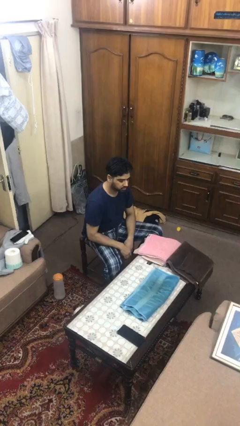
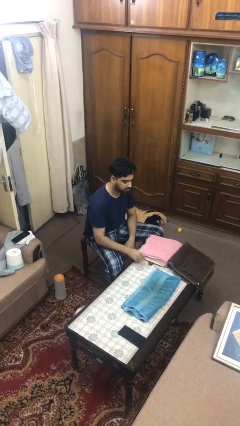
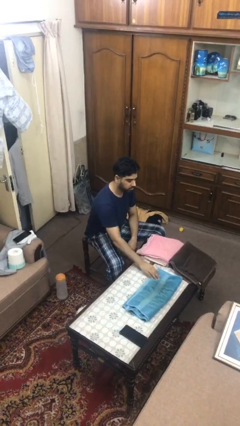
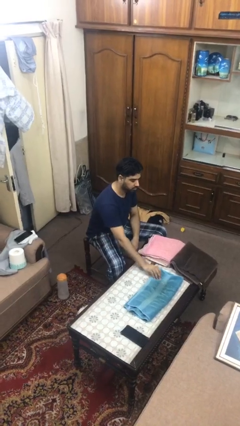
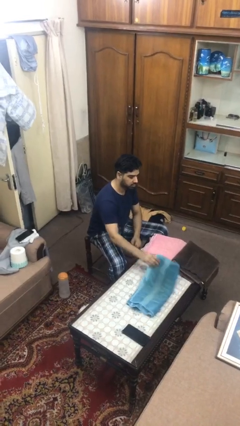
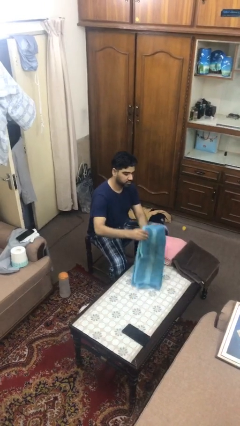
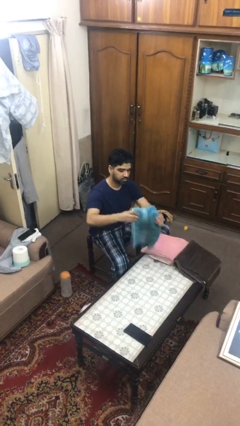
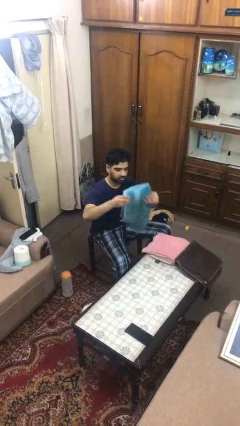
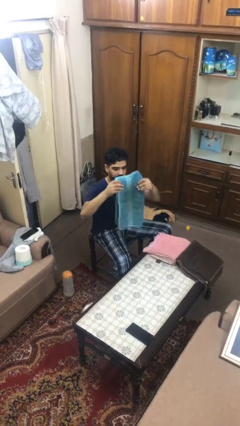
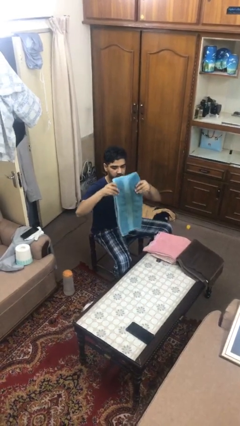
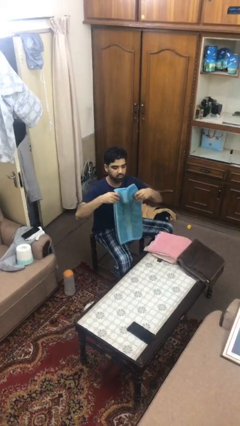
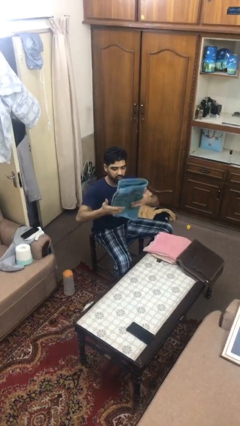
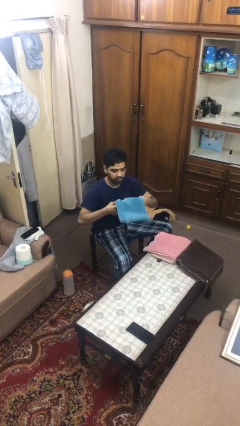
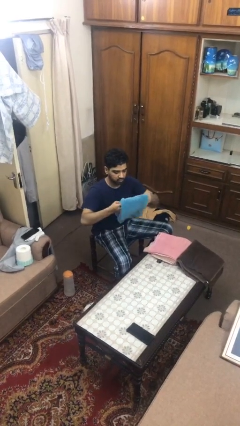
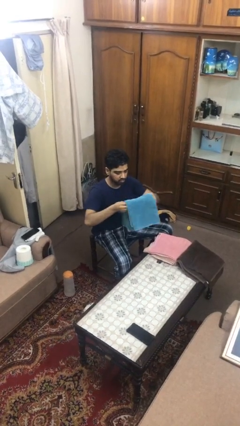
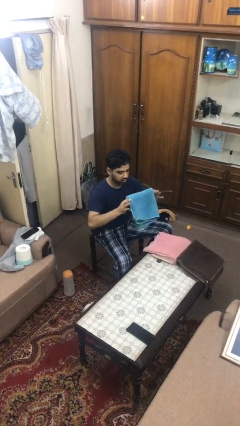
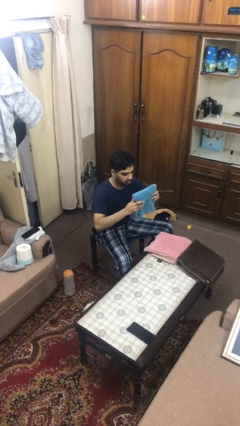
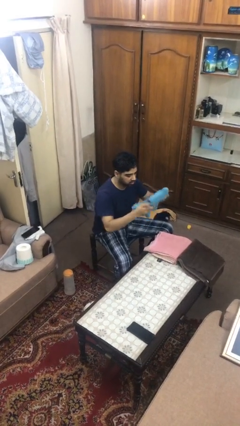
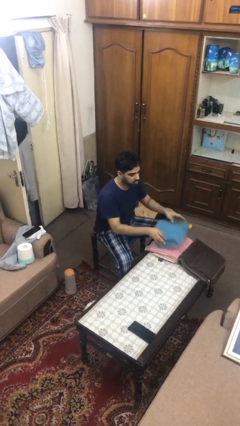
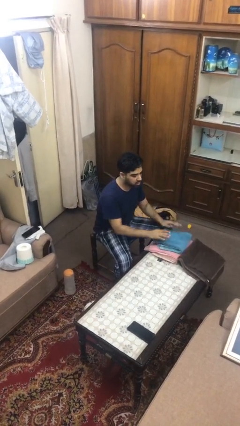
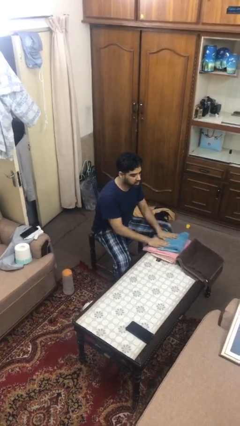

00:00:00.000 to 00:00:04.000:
person folds towel

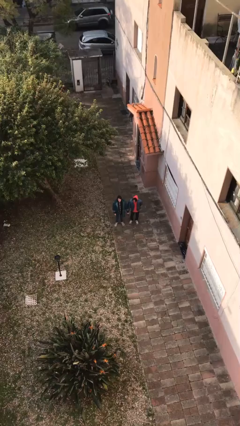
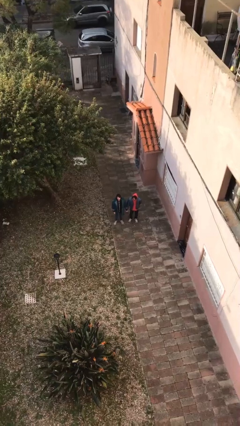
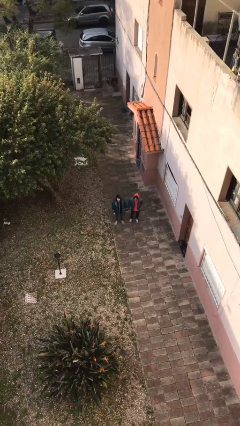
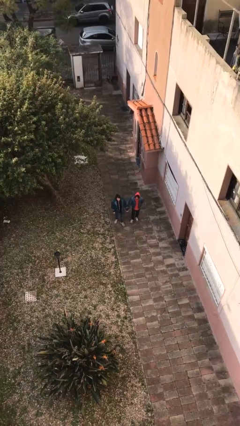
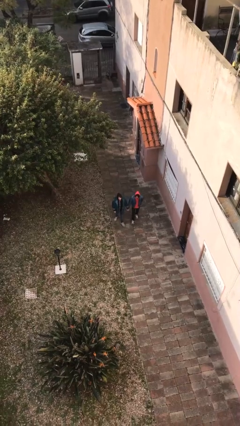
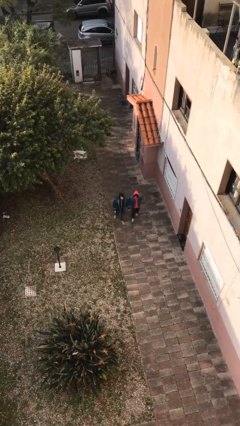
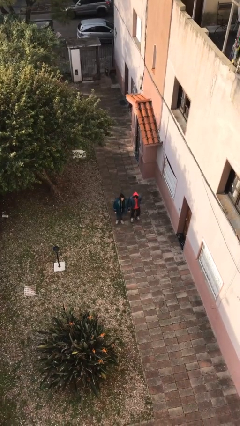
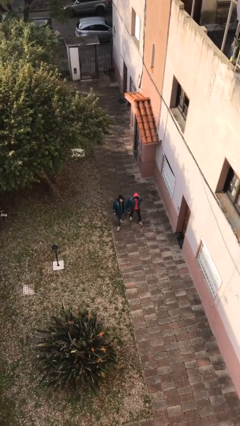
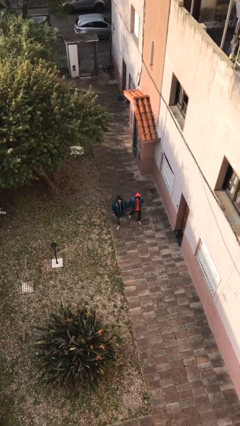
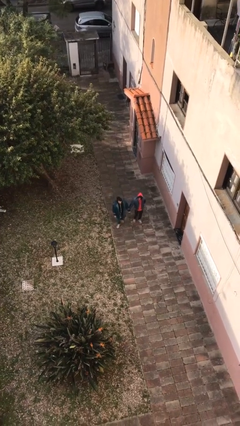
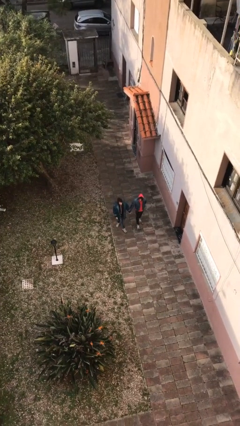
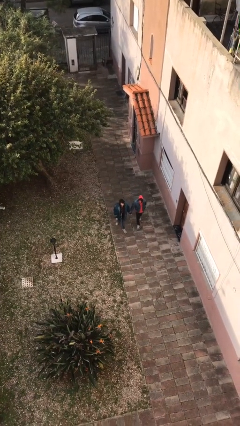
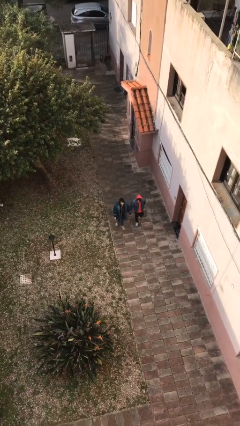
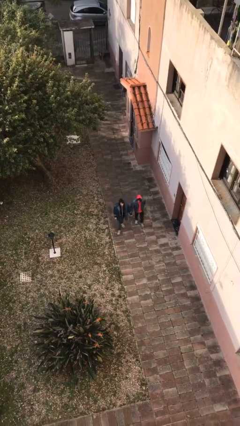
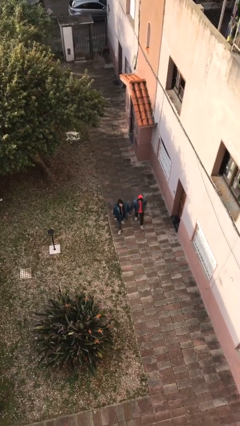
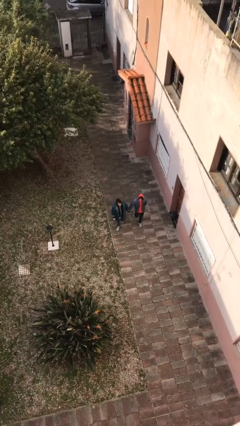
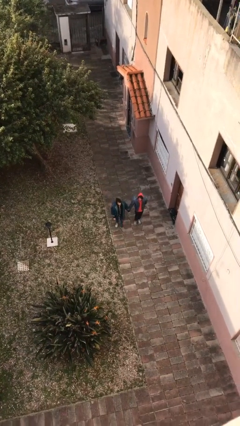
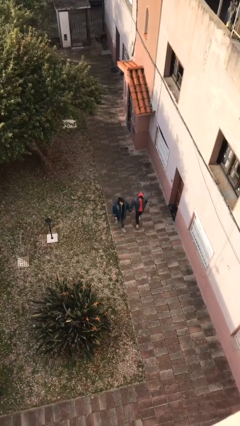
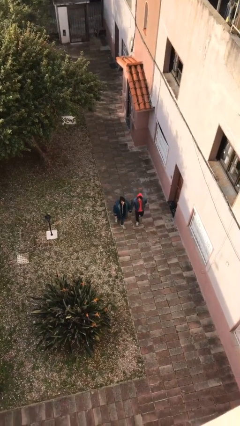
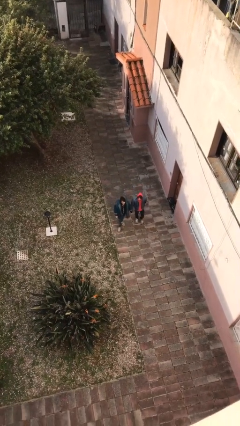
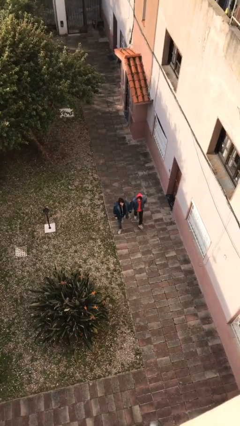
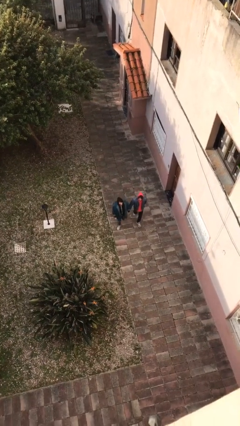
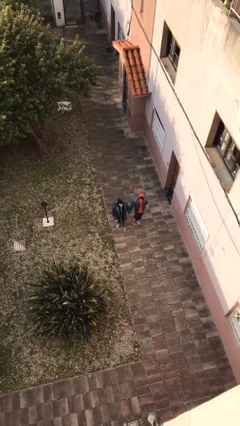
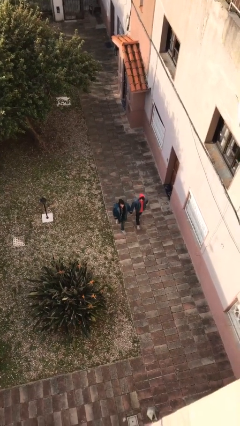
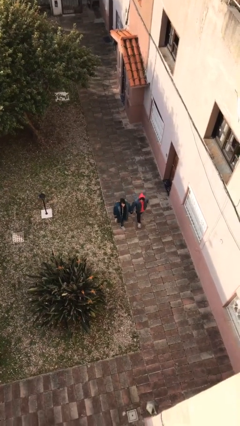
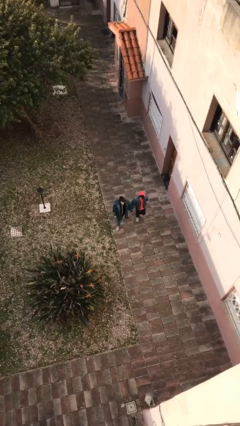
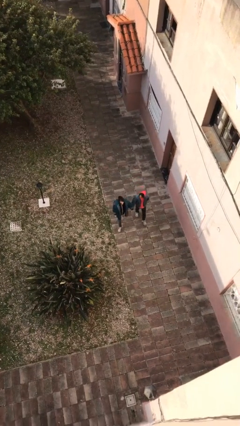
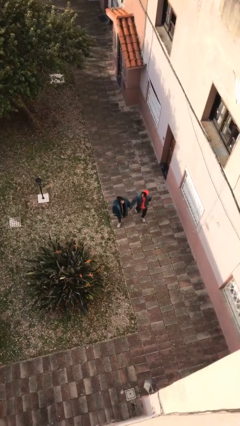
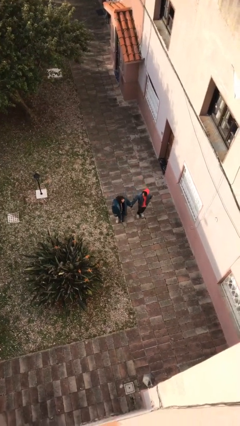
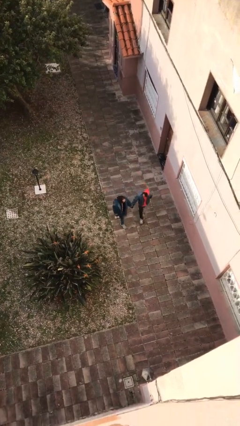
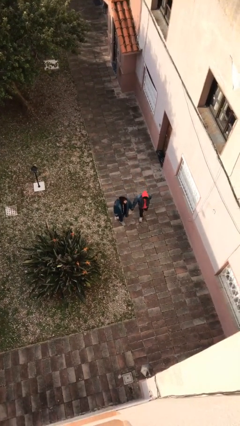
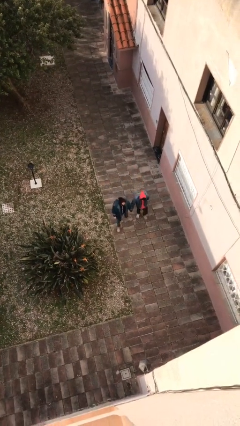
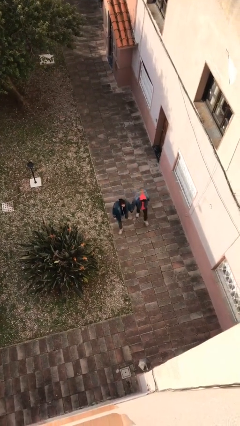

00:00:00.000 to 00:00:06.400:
person holds hand

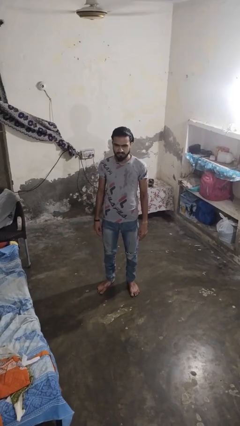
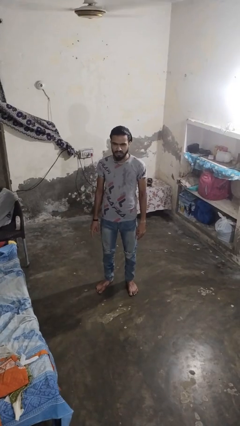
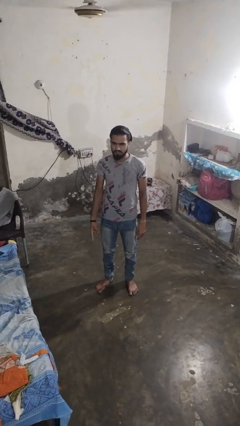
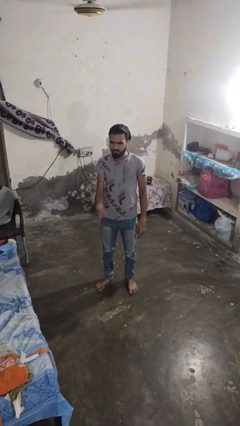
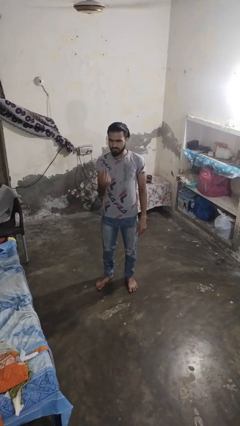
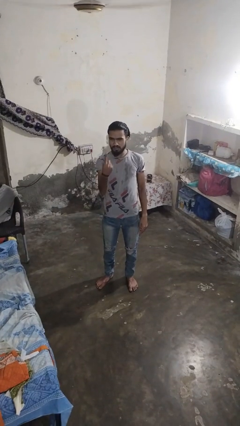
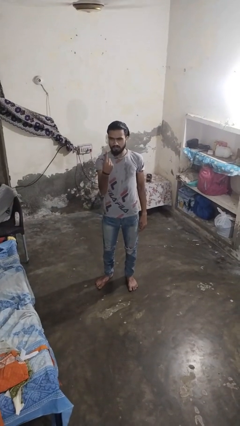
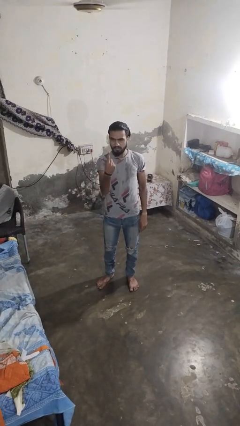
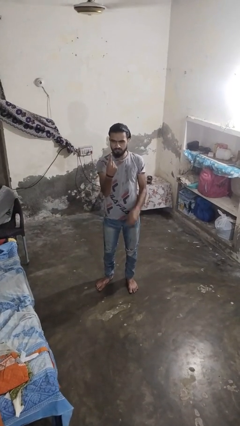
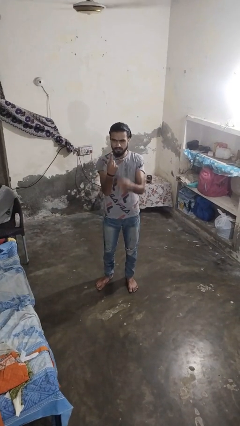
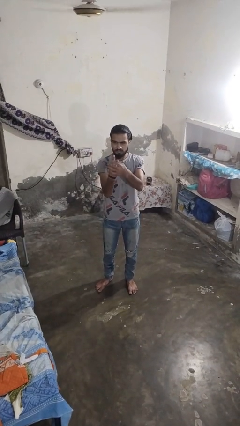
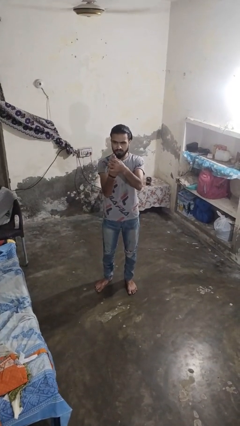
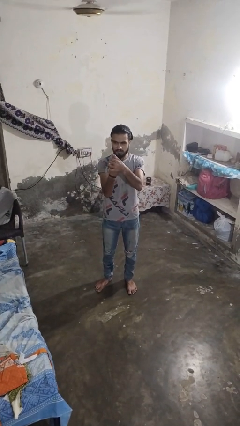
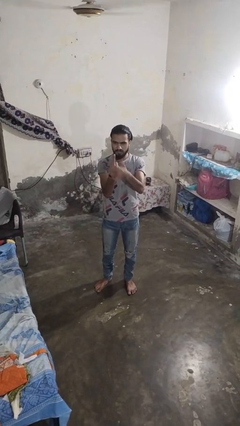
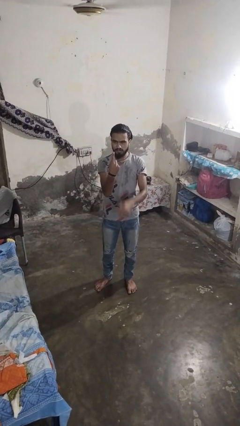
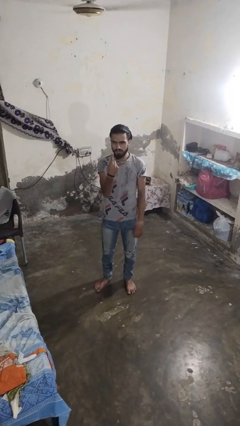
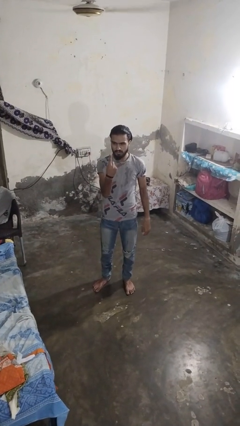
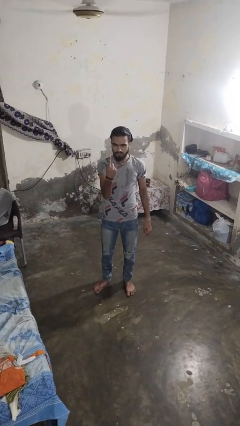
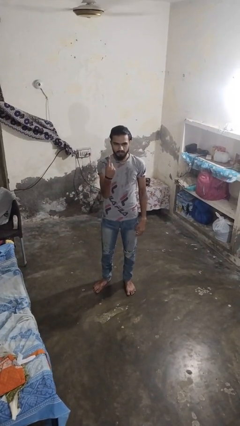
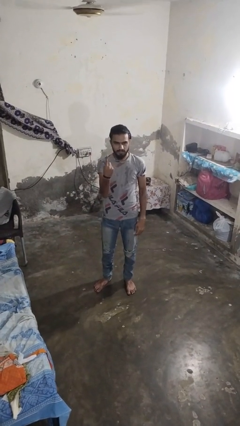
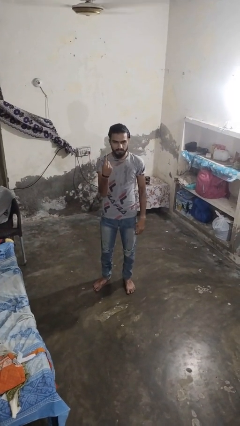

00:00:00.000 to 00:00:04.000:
person gestures number one

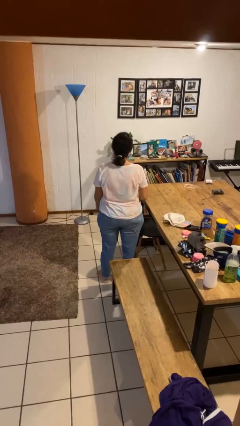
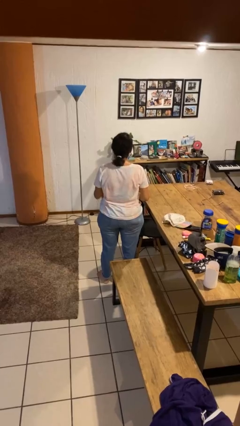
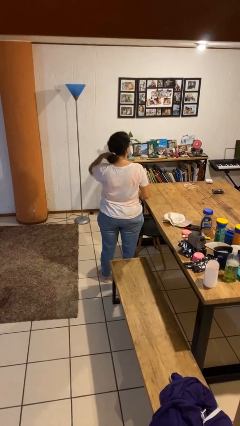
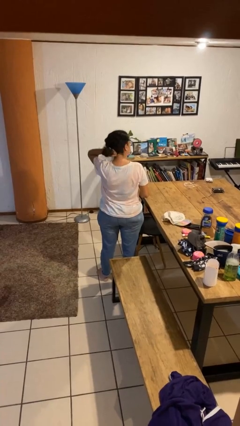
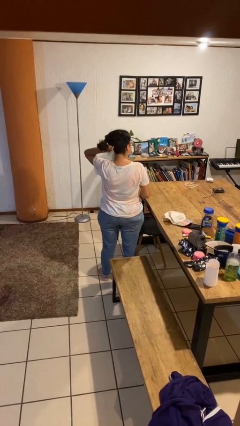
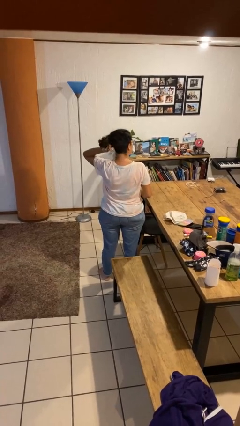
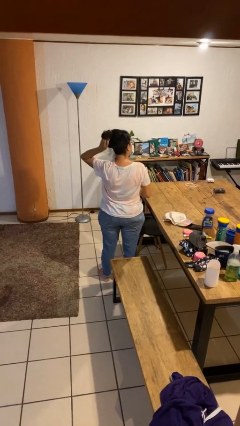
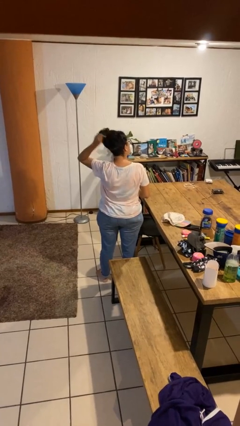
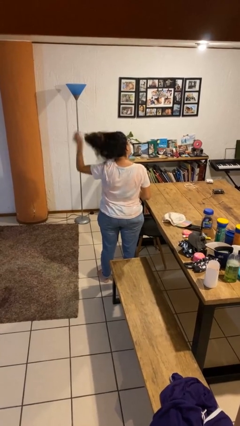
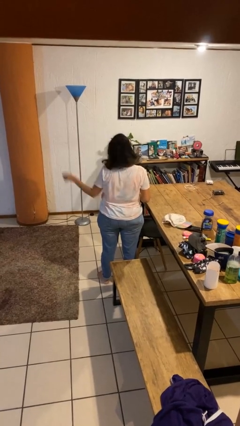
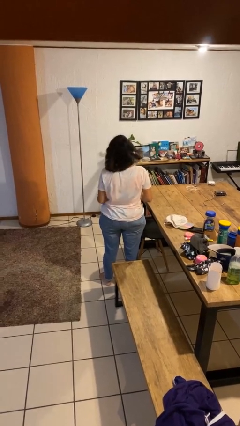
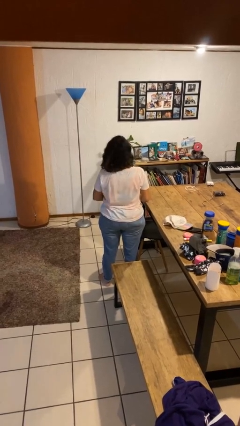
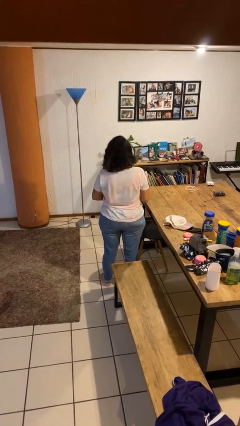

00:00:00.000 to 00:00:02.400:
person takes off hairtie

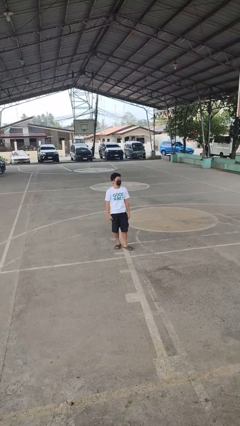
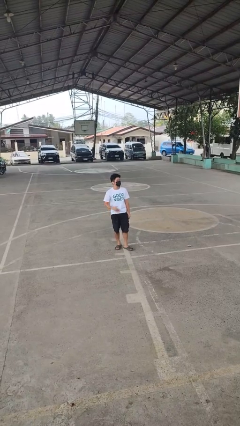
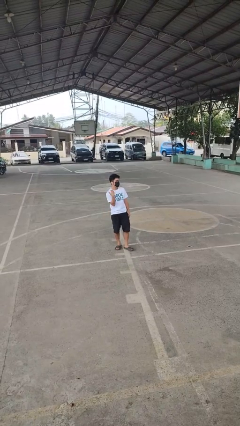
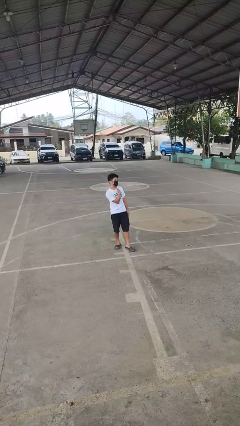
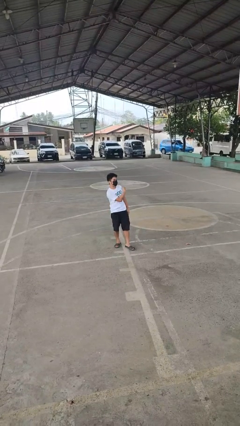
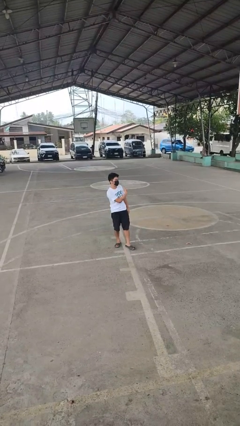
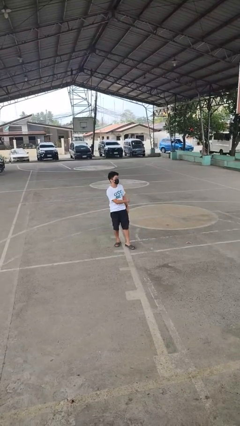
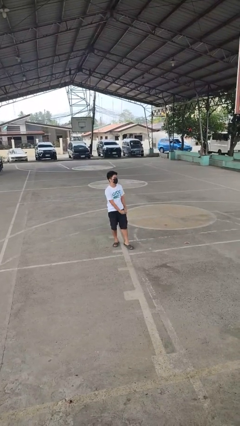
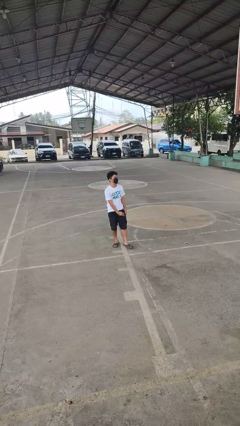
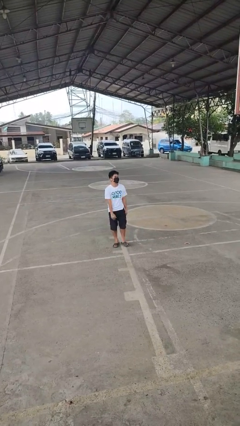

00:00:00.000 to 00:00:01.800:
person gestures cut
